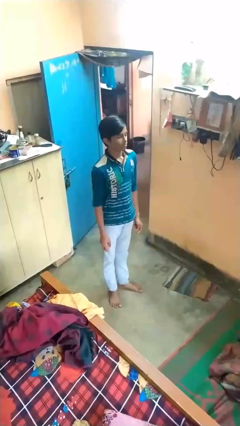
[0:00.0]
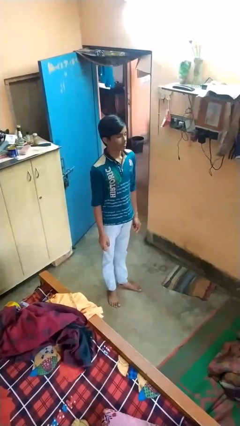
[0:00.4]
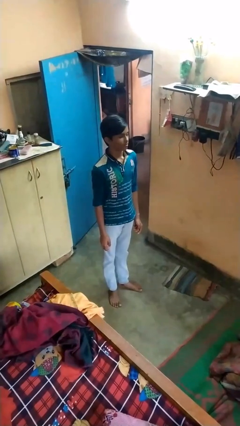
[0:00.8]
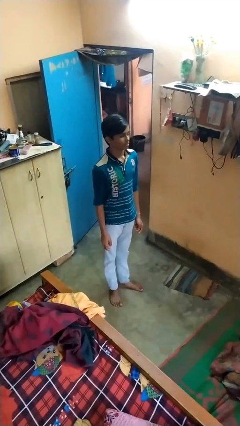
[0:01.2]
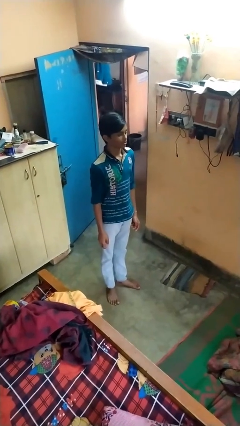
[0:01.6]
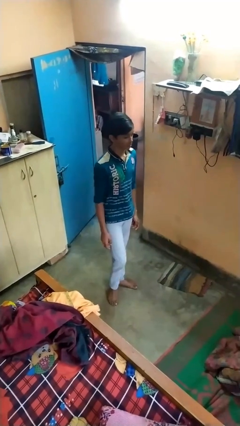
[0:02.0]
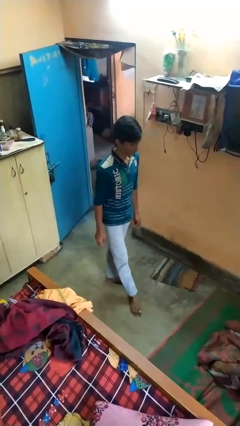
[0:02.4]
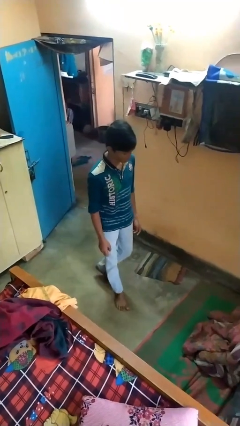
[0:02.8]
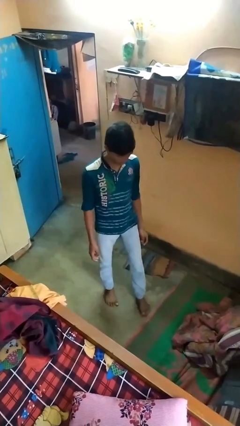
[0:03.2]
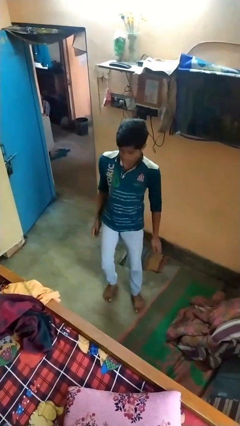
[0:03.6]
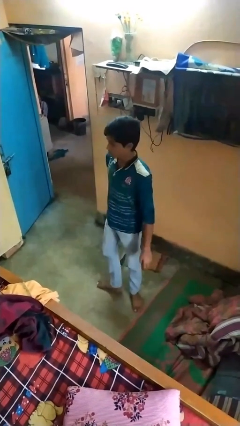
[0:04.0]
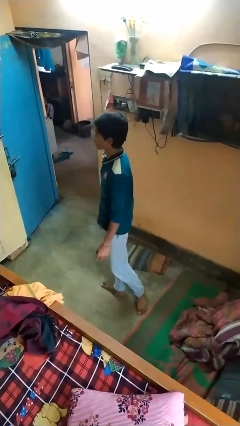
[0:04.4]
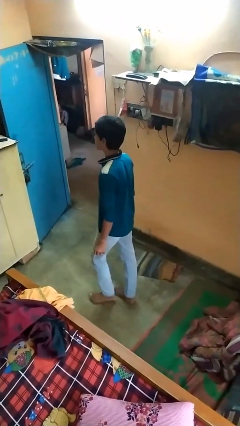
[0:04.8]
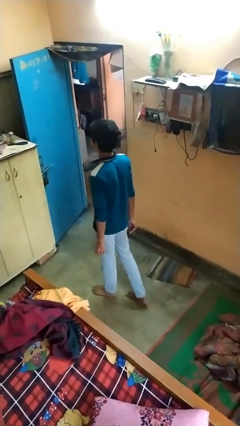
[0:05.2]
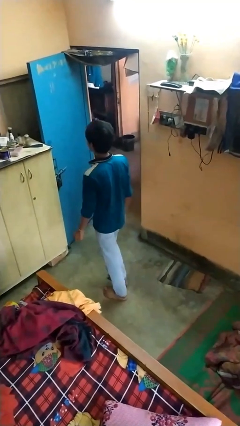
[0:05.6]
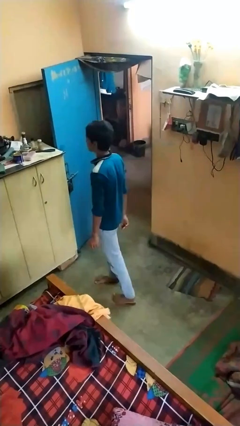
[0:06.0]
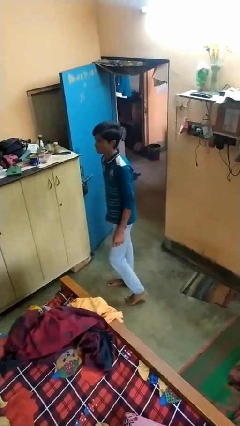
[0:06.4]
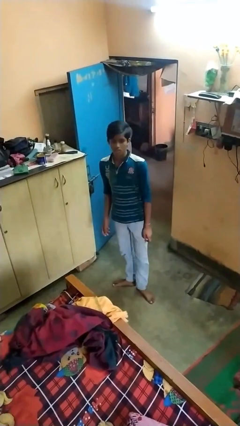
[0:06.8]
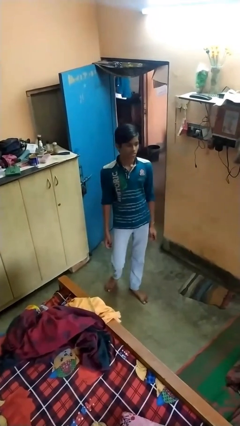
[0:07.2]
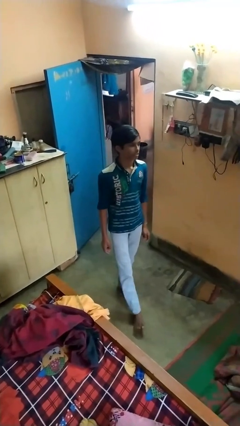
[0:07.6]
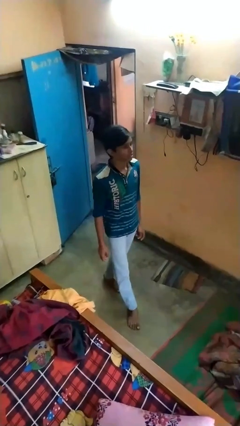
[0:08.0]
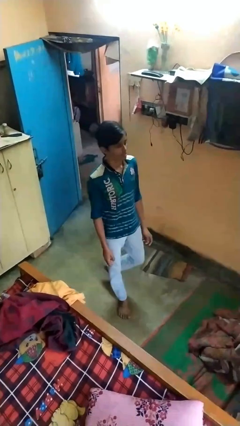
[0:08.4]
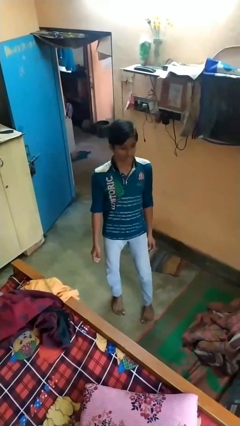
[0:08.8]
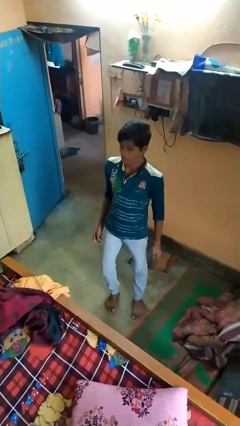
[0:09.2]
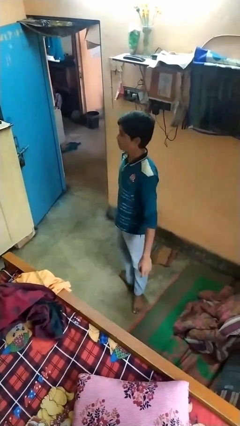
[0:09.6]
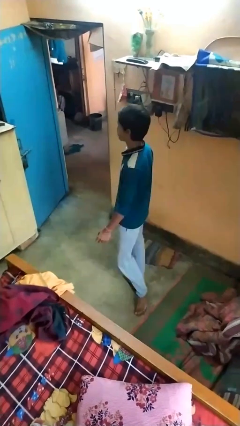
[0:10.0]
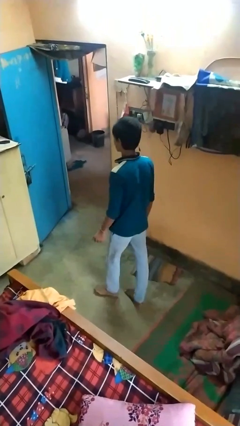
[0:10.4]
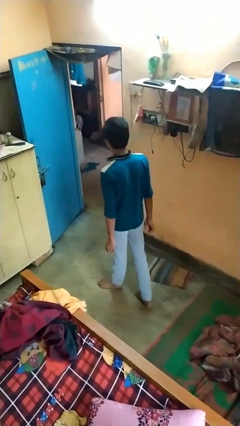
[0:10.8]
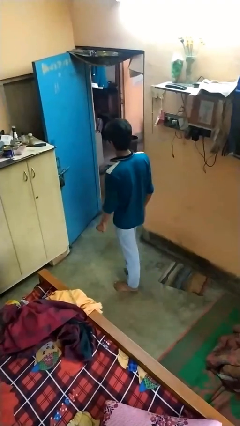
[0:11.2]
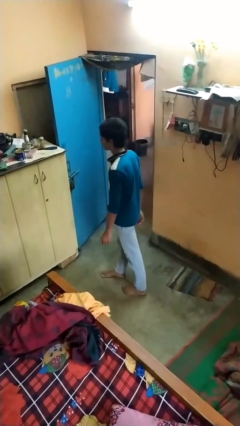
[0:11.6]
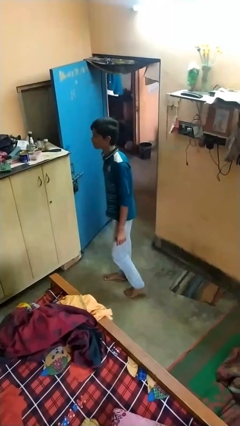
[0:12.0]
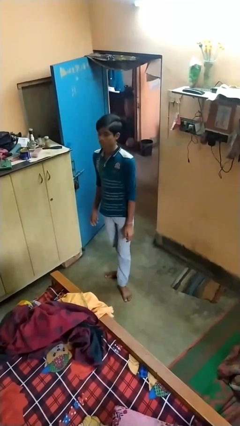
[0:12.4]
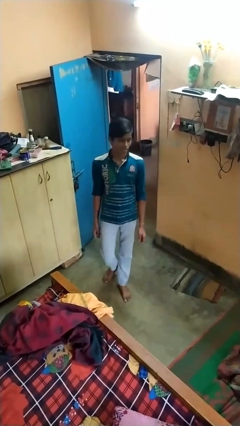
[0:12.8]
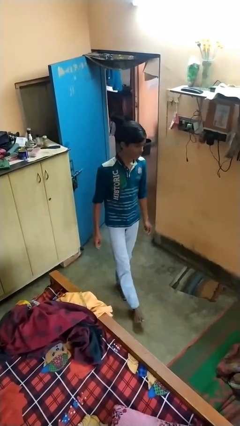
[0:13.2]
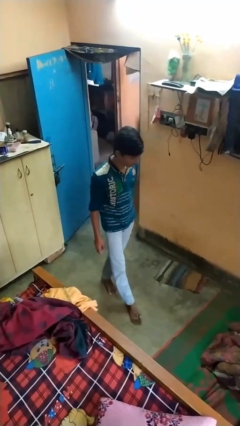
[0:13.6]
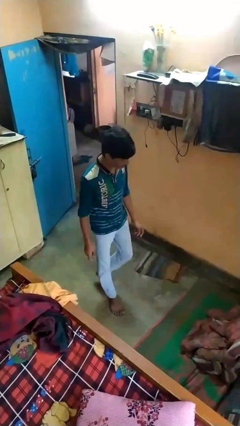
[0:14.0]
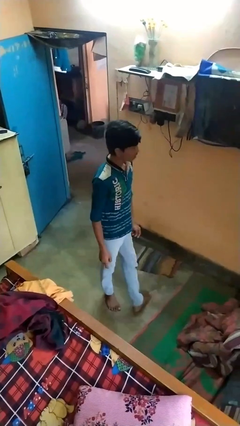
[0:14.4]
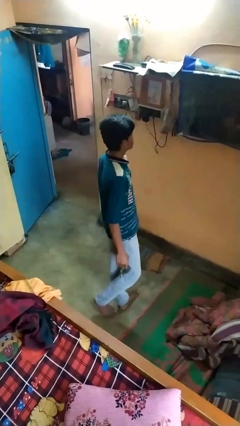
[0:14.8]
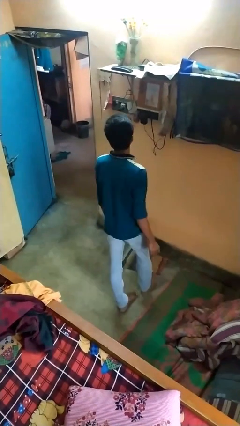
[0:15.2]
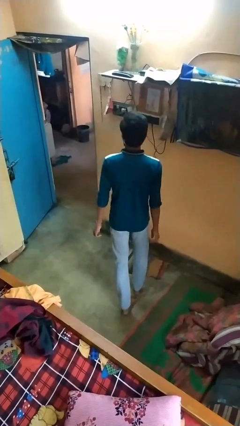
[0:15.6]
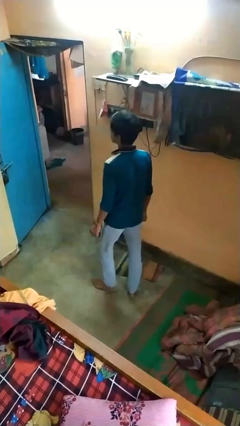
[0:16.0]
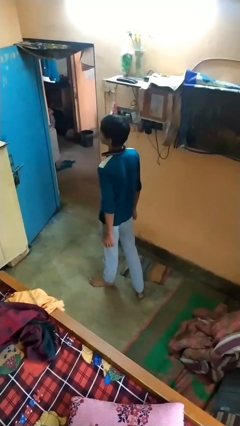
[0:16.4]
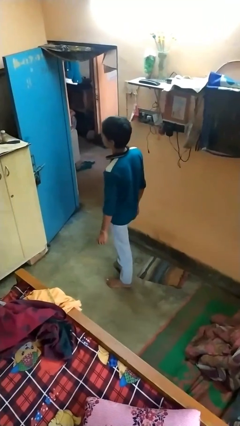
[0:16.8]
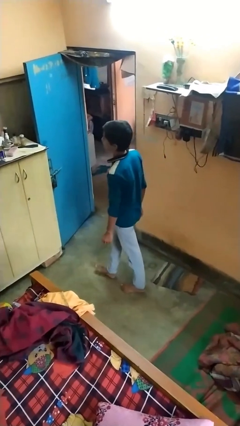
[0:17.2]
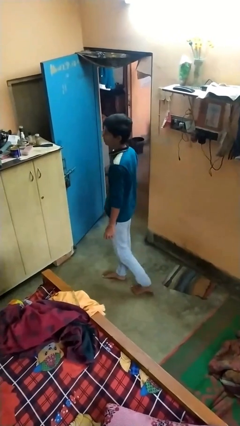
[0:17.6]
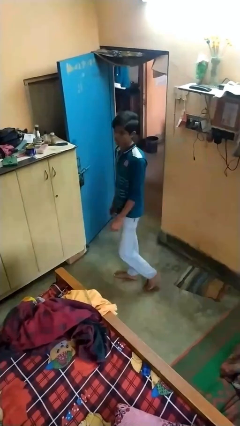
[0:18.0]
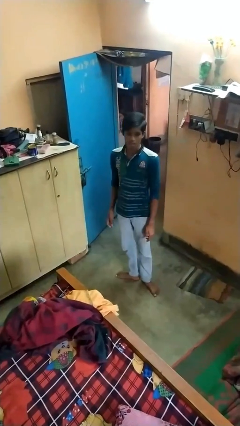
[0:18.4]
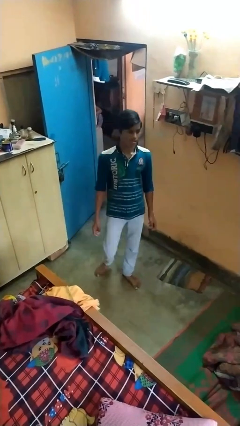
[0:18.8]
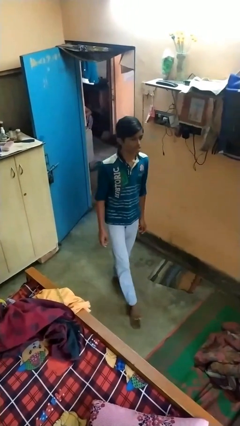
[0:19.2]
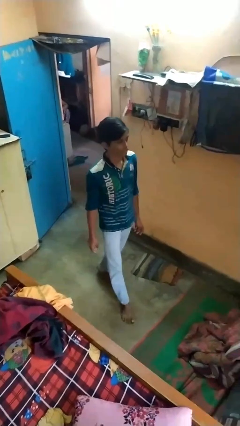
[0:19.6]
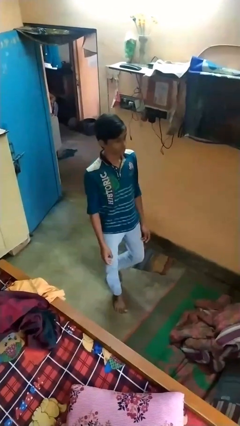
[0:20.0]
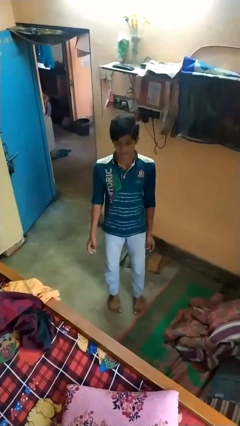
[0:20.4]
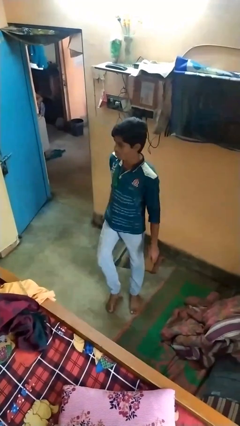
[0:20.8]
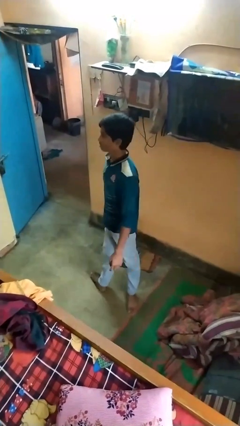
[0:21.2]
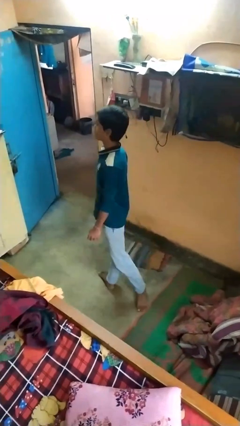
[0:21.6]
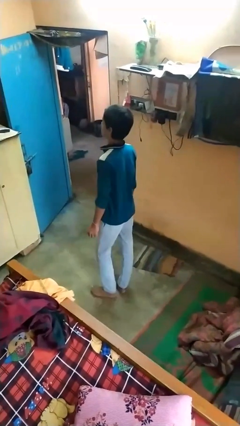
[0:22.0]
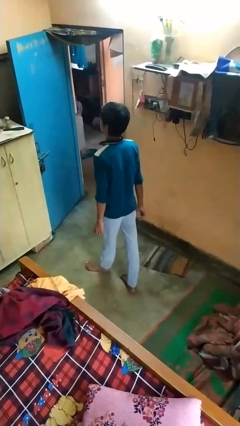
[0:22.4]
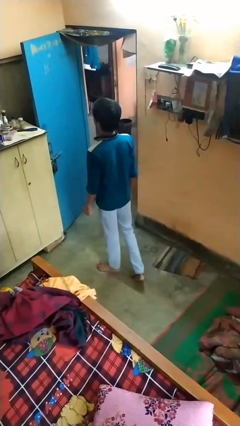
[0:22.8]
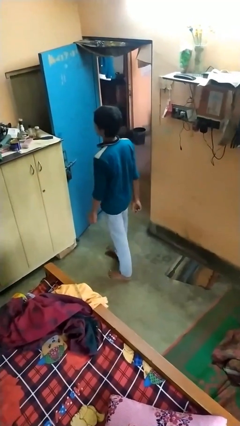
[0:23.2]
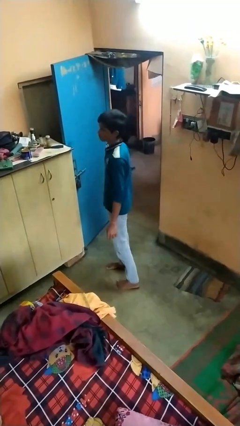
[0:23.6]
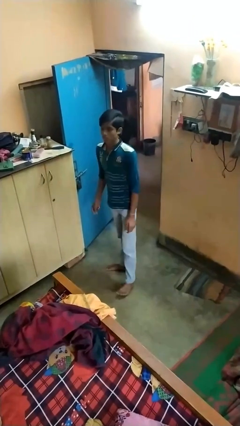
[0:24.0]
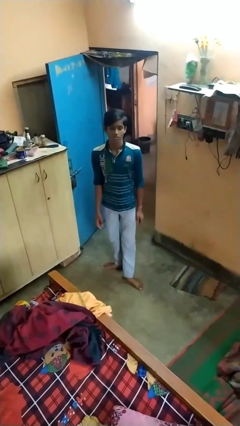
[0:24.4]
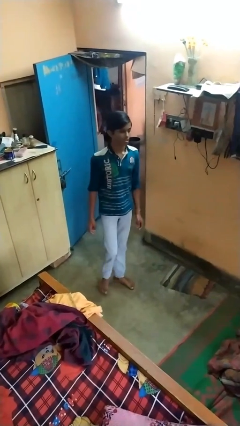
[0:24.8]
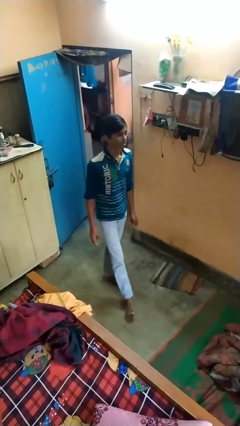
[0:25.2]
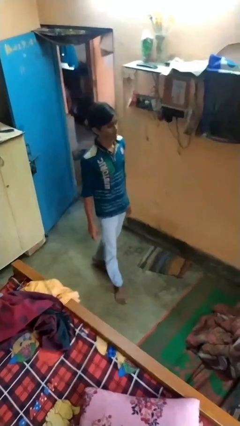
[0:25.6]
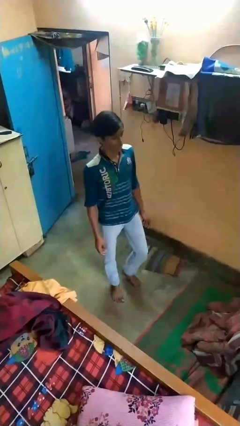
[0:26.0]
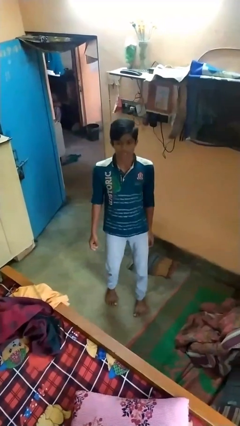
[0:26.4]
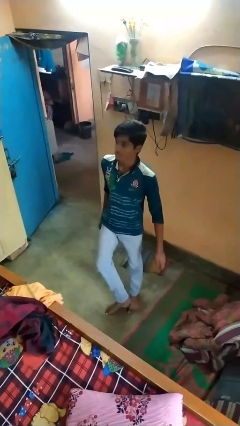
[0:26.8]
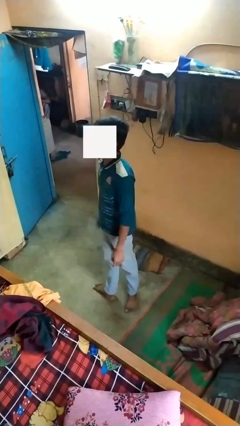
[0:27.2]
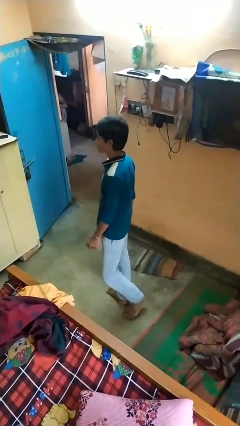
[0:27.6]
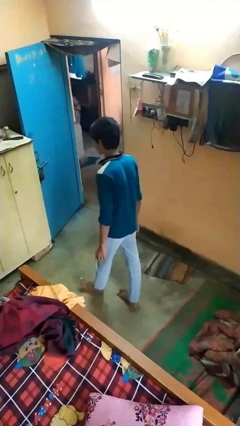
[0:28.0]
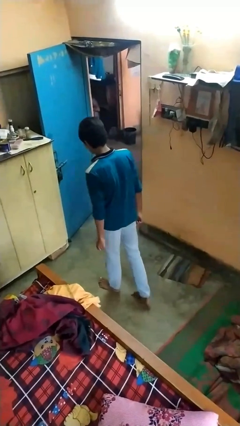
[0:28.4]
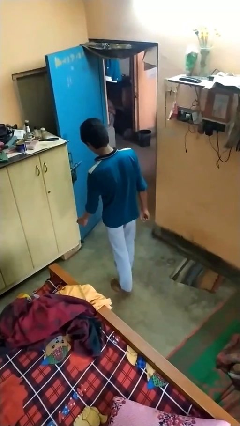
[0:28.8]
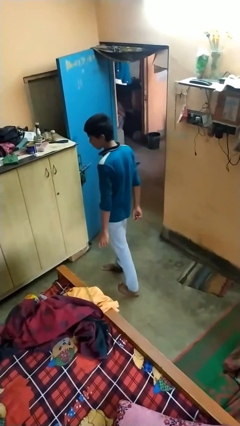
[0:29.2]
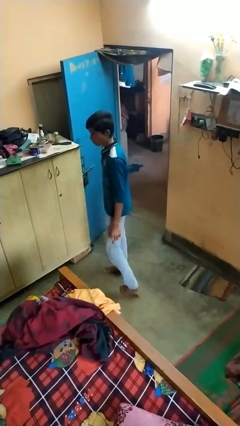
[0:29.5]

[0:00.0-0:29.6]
person walks

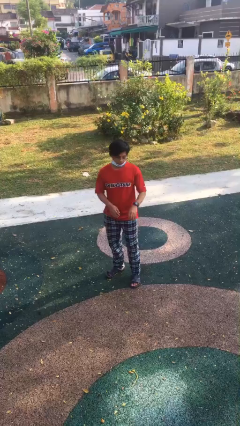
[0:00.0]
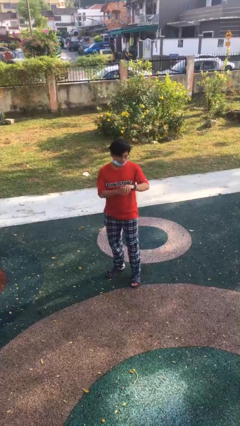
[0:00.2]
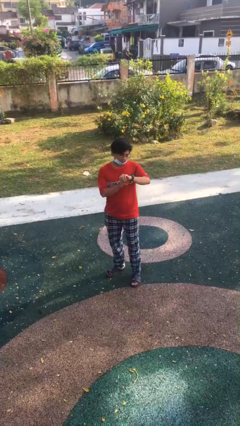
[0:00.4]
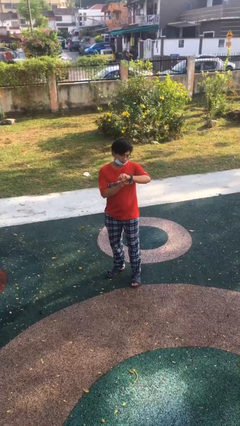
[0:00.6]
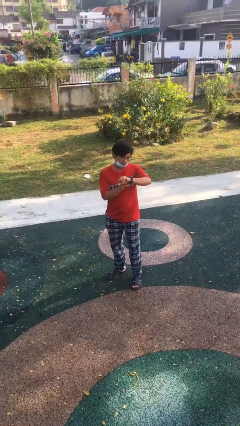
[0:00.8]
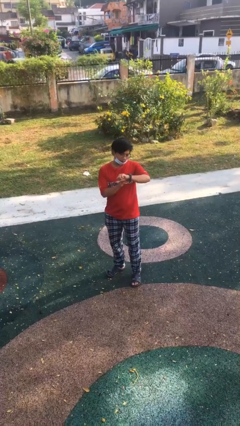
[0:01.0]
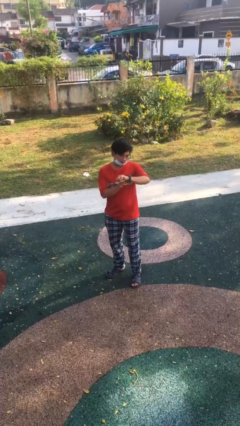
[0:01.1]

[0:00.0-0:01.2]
person looks at wristwatch

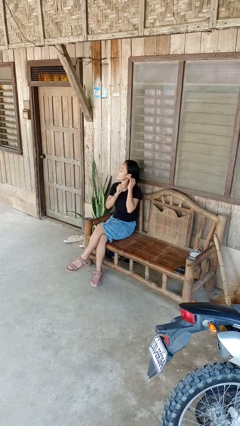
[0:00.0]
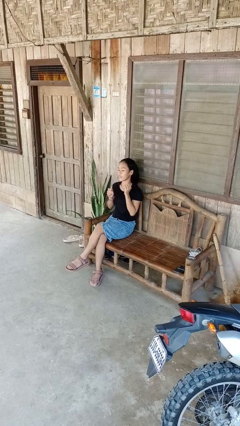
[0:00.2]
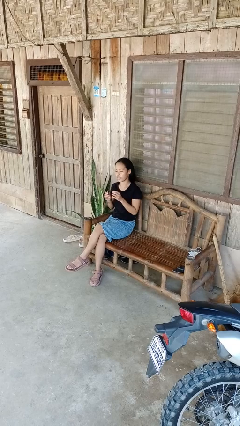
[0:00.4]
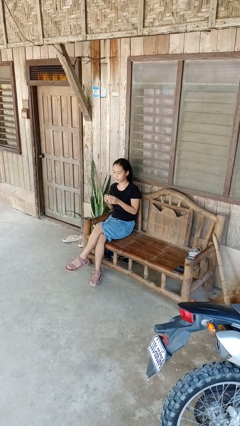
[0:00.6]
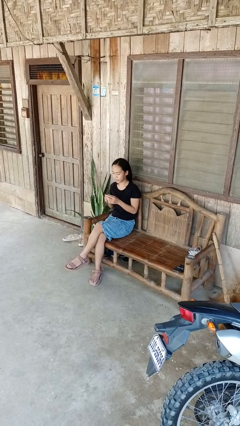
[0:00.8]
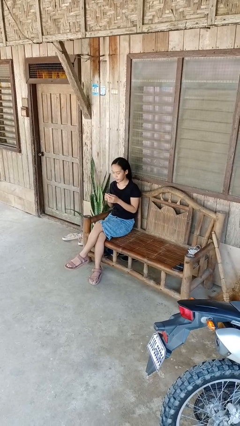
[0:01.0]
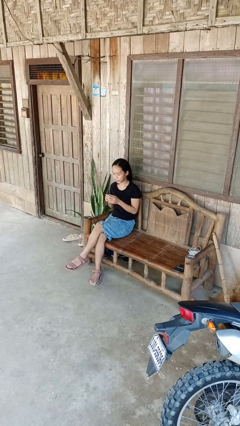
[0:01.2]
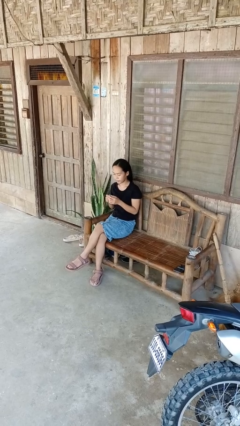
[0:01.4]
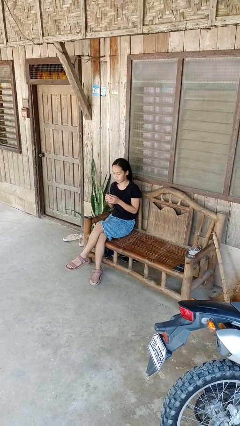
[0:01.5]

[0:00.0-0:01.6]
person takes off earrings

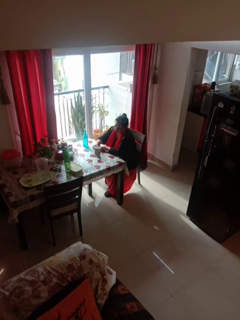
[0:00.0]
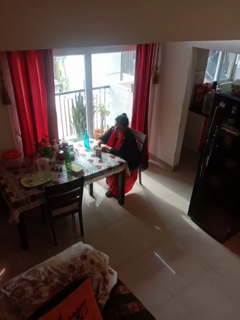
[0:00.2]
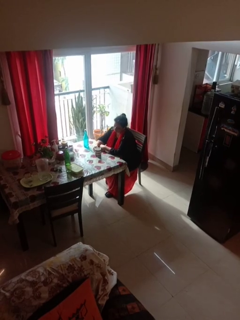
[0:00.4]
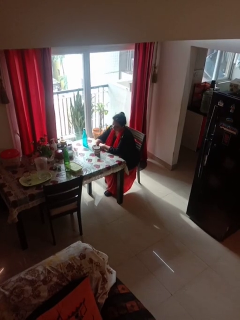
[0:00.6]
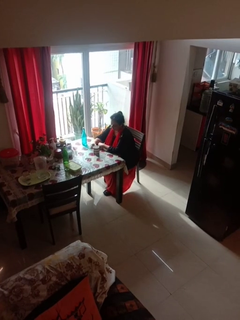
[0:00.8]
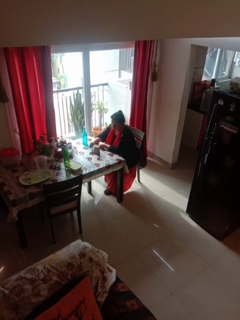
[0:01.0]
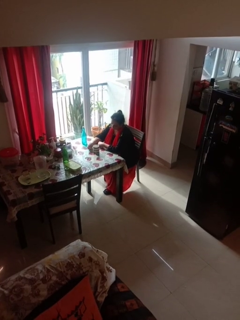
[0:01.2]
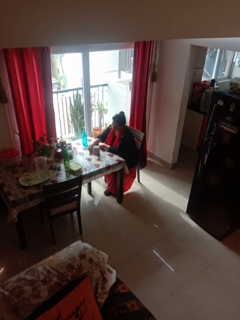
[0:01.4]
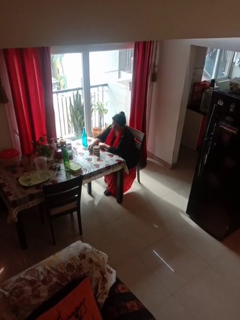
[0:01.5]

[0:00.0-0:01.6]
person puts down object on table
